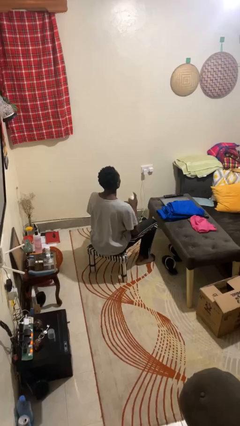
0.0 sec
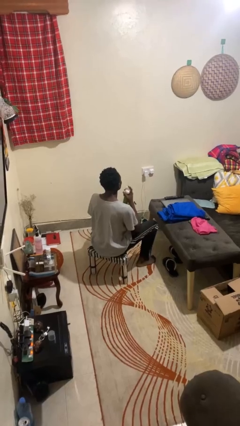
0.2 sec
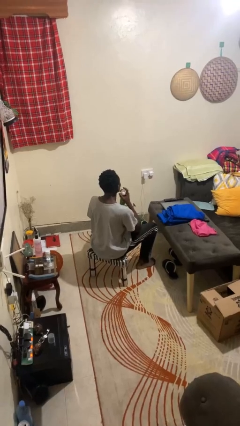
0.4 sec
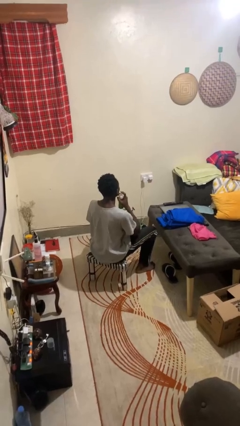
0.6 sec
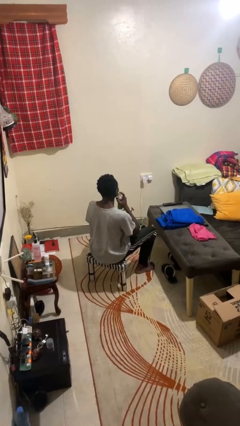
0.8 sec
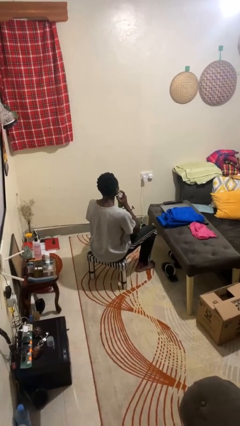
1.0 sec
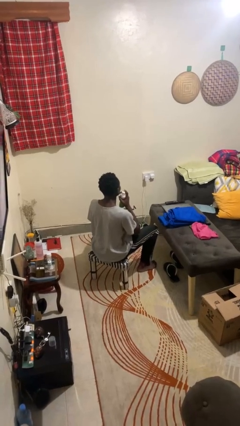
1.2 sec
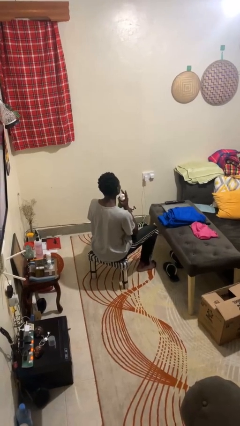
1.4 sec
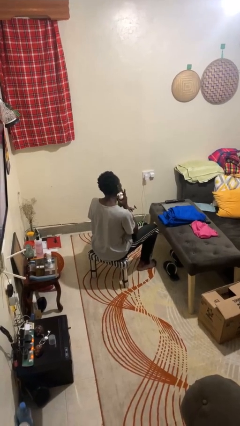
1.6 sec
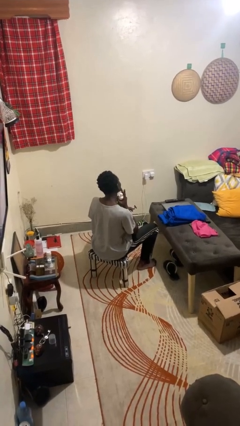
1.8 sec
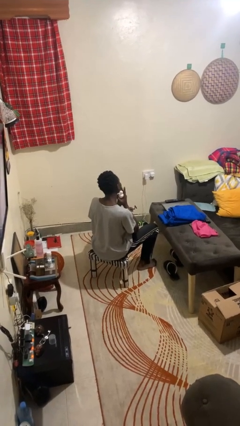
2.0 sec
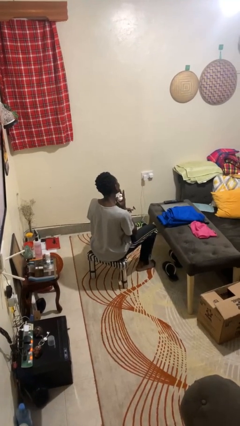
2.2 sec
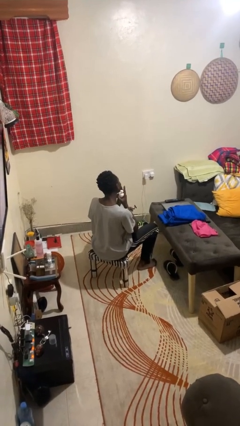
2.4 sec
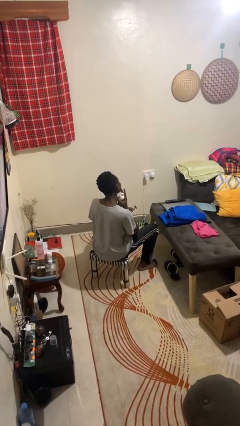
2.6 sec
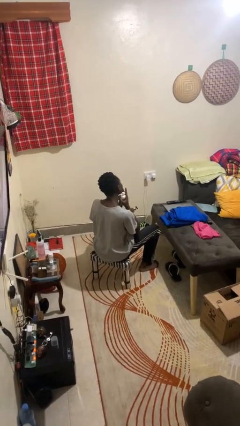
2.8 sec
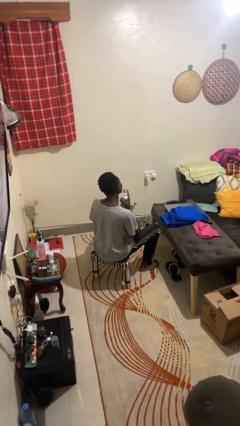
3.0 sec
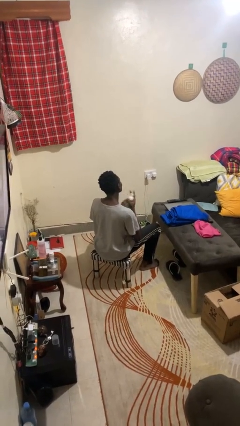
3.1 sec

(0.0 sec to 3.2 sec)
person applies shaving cream

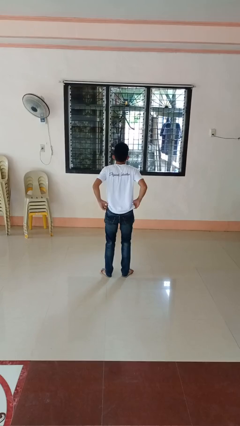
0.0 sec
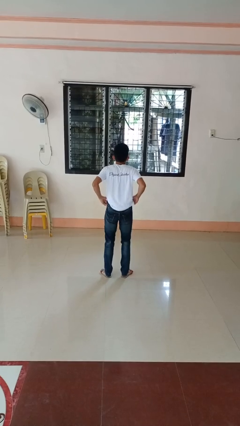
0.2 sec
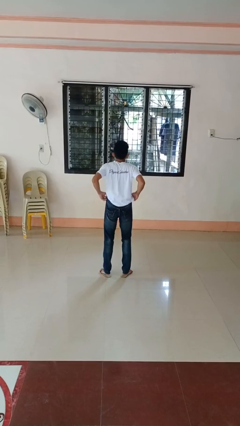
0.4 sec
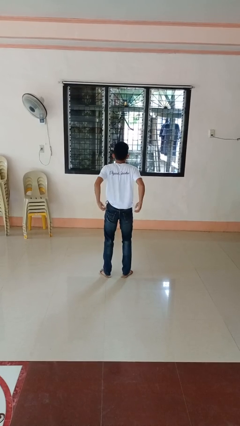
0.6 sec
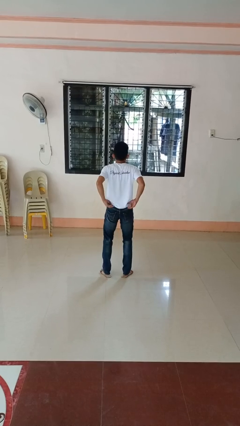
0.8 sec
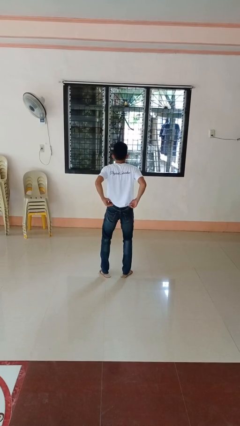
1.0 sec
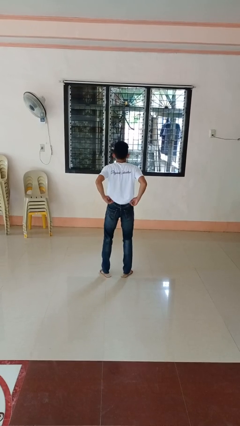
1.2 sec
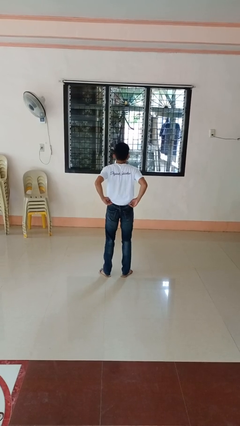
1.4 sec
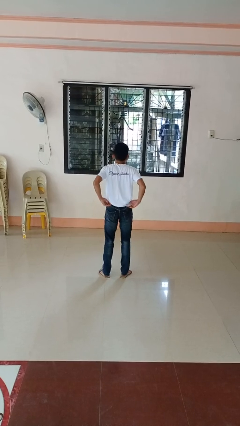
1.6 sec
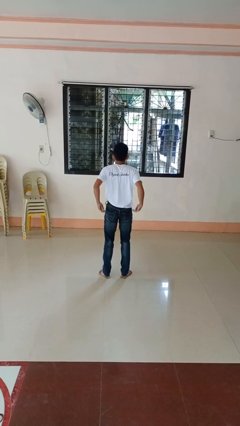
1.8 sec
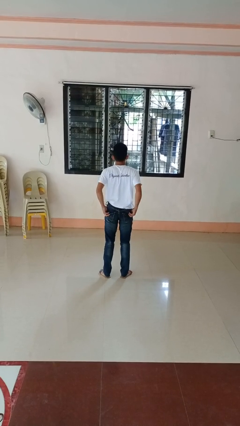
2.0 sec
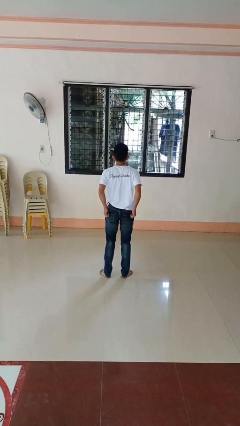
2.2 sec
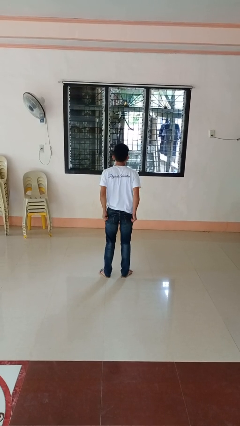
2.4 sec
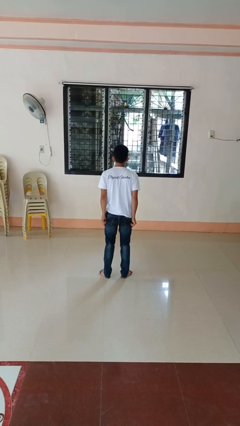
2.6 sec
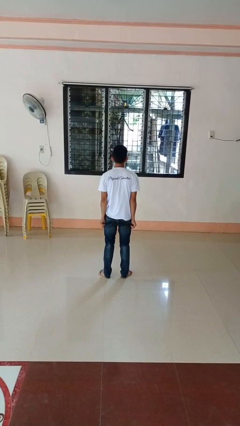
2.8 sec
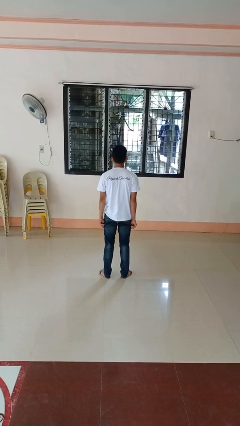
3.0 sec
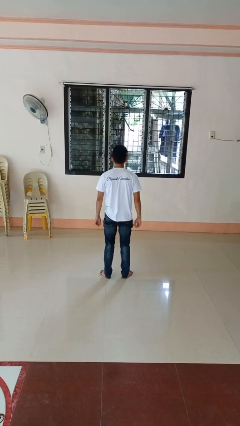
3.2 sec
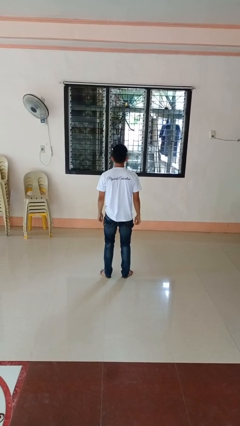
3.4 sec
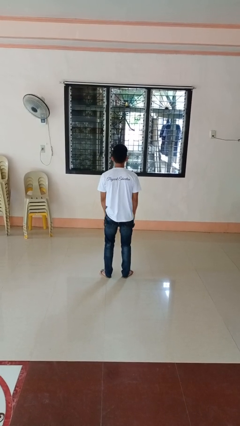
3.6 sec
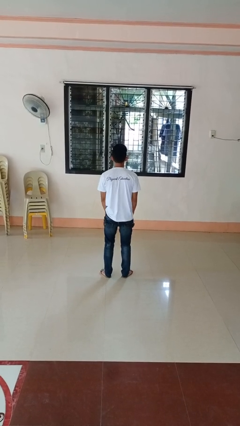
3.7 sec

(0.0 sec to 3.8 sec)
person hikes up pants

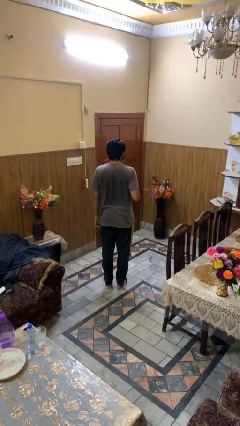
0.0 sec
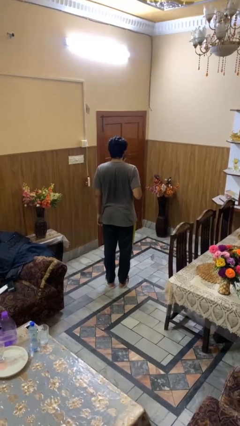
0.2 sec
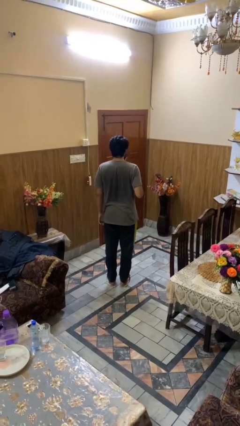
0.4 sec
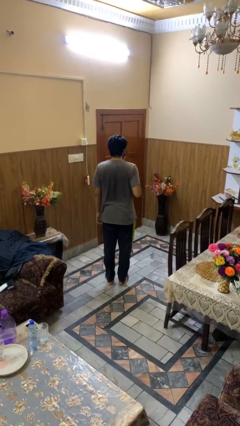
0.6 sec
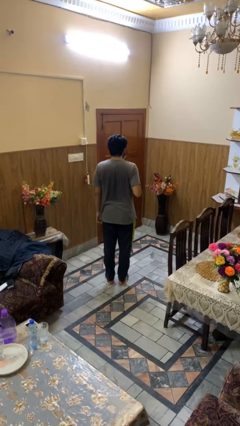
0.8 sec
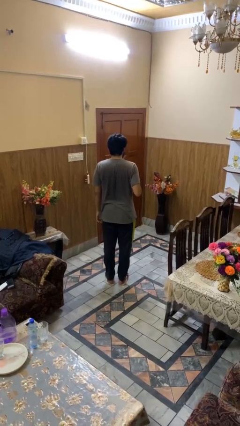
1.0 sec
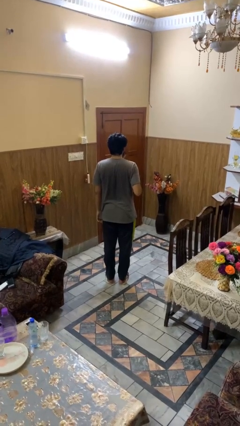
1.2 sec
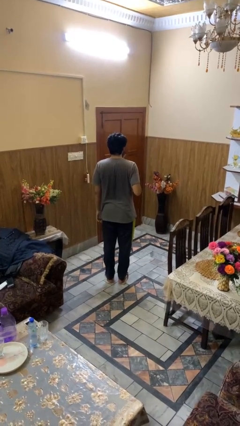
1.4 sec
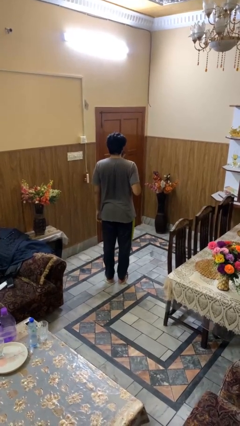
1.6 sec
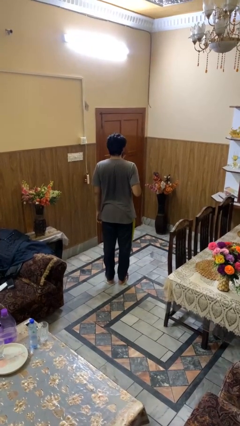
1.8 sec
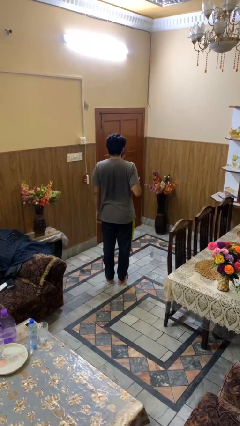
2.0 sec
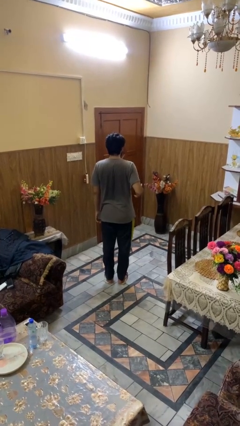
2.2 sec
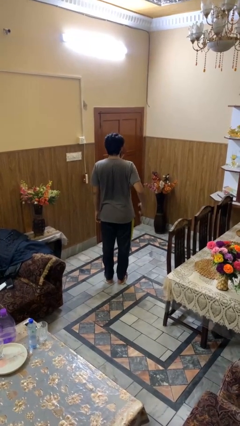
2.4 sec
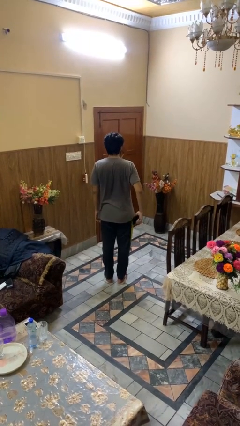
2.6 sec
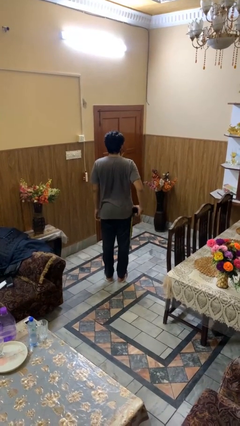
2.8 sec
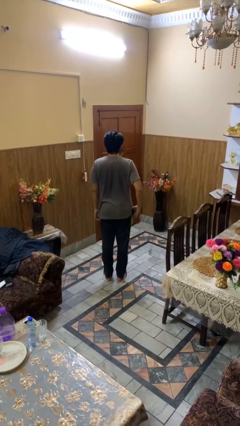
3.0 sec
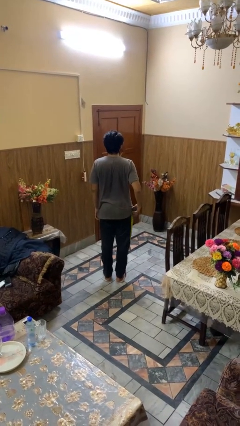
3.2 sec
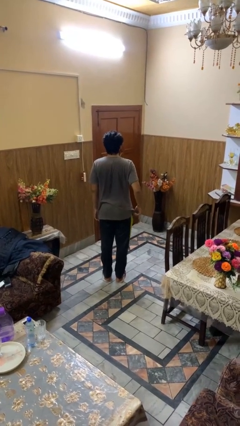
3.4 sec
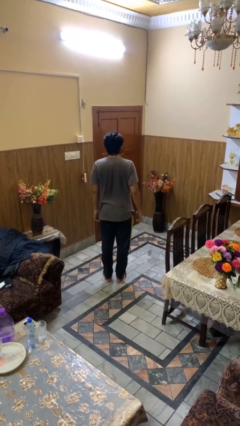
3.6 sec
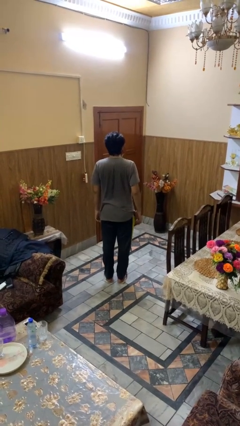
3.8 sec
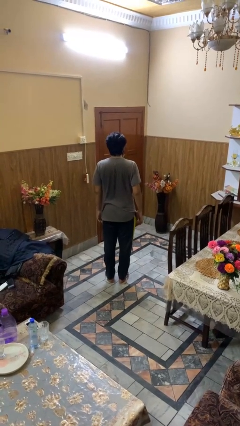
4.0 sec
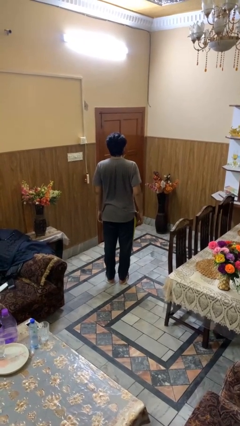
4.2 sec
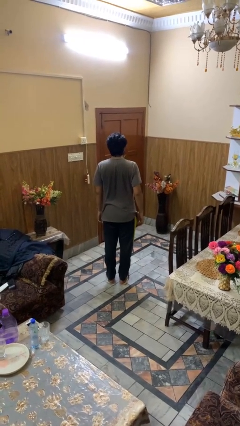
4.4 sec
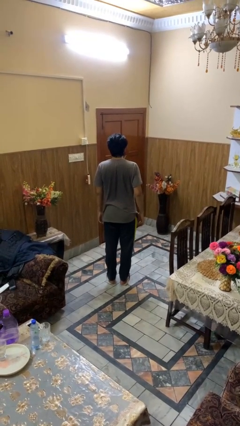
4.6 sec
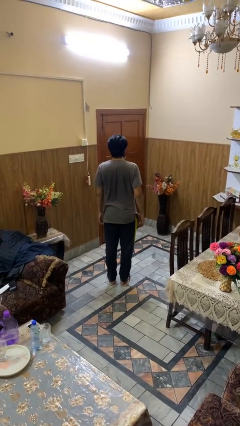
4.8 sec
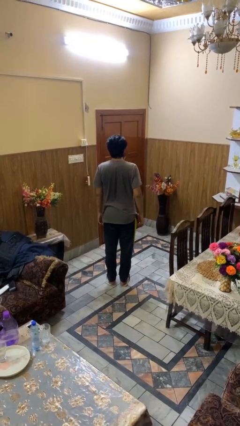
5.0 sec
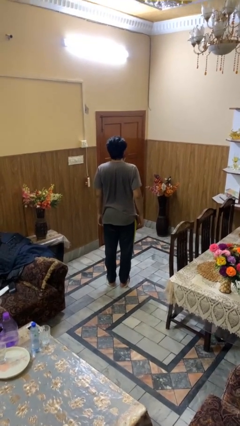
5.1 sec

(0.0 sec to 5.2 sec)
person puts phone into pocket

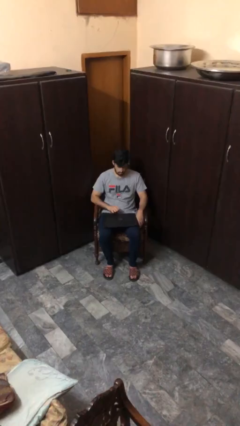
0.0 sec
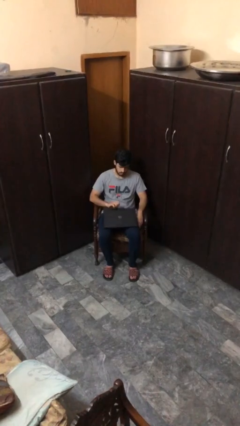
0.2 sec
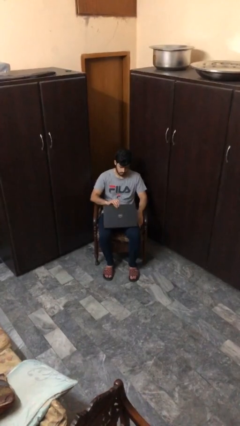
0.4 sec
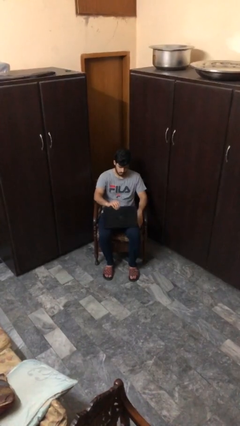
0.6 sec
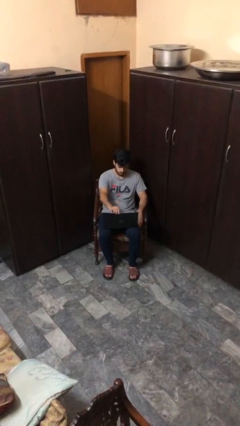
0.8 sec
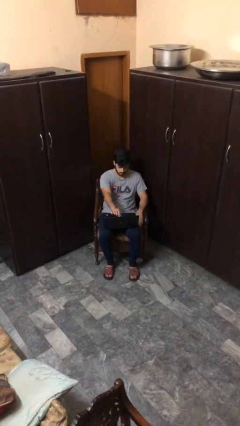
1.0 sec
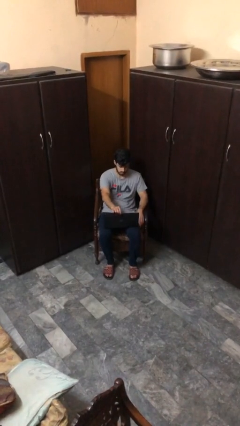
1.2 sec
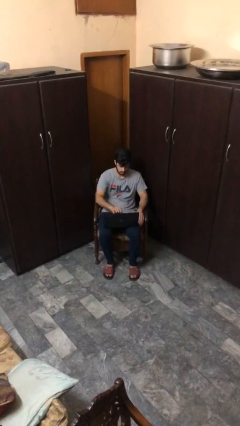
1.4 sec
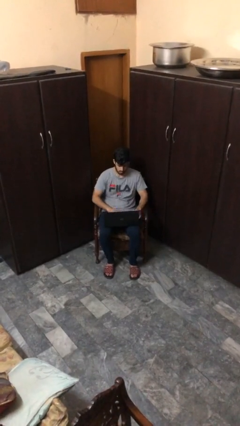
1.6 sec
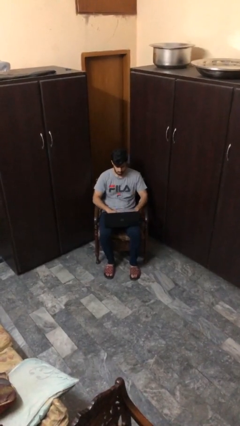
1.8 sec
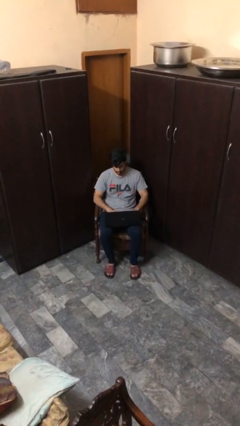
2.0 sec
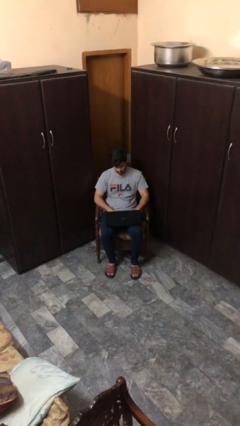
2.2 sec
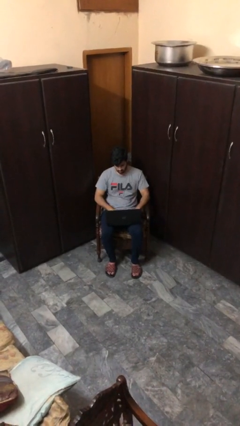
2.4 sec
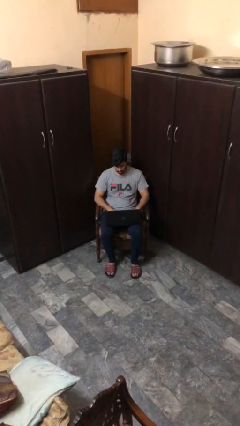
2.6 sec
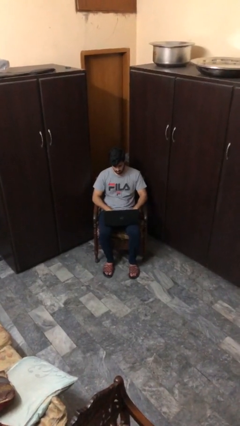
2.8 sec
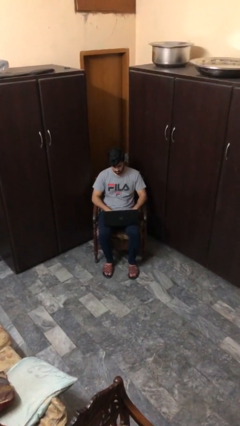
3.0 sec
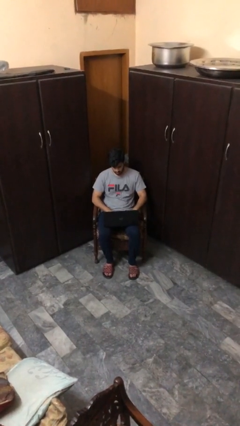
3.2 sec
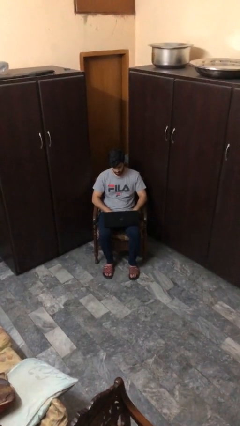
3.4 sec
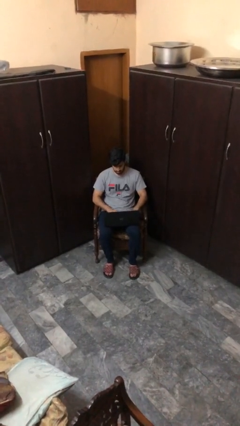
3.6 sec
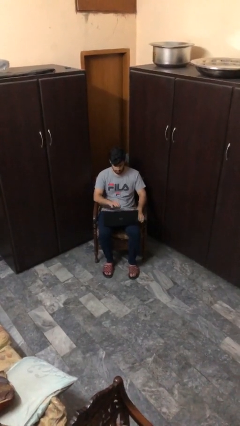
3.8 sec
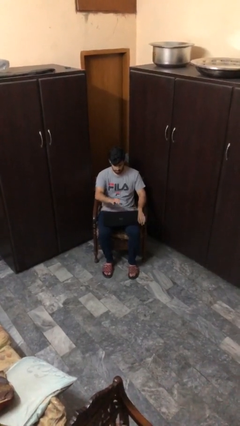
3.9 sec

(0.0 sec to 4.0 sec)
person opens laptop

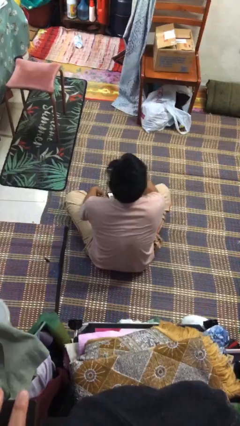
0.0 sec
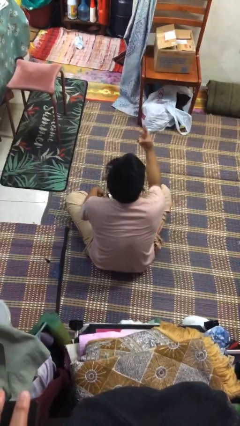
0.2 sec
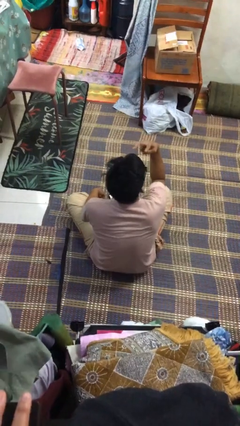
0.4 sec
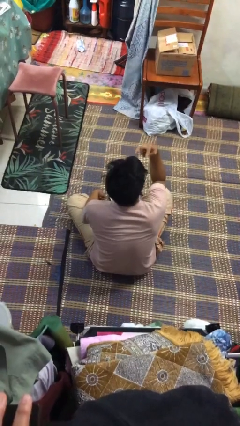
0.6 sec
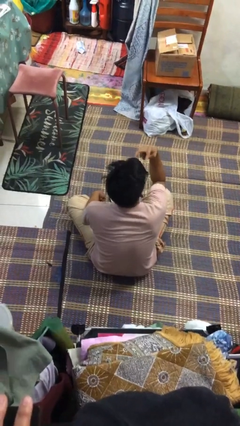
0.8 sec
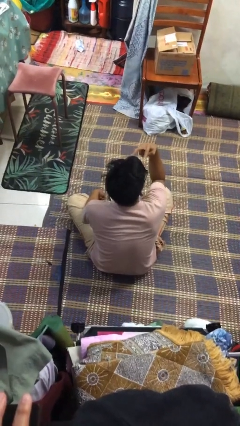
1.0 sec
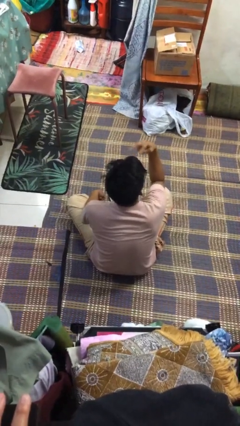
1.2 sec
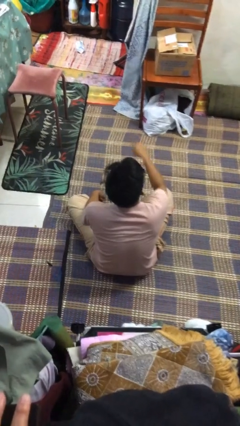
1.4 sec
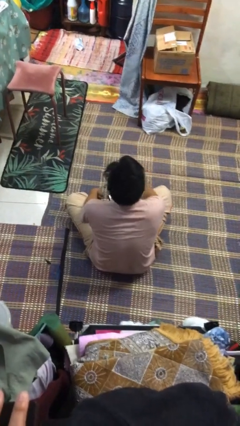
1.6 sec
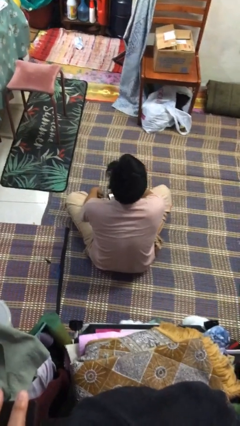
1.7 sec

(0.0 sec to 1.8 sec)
person gestures watch closely
